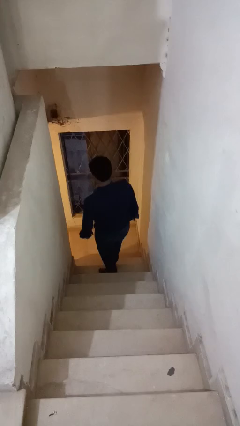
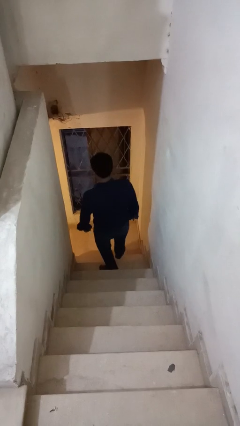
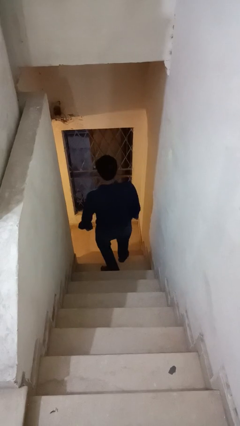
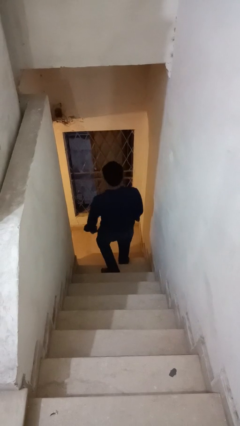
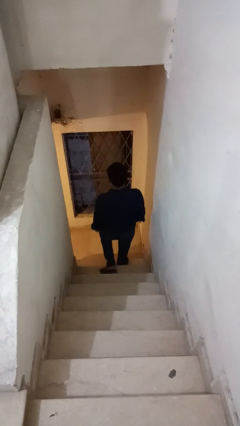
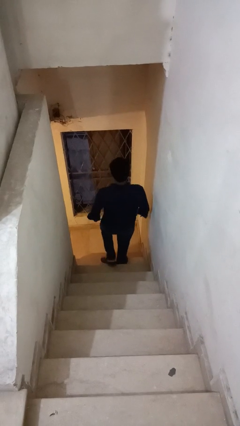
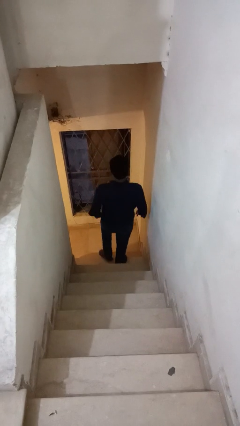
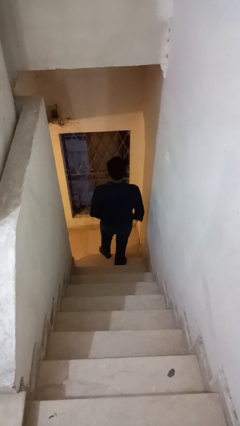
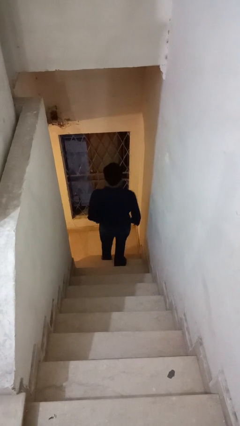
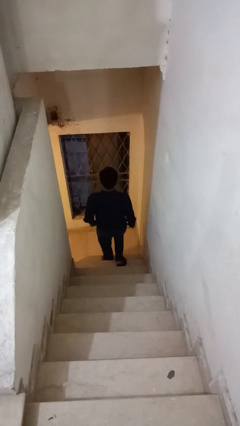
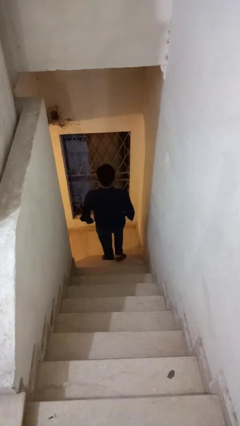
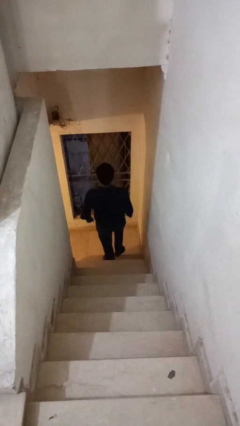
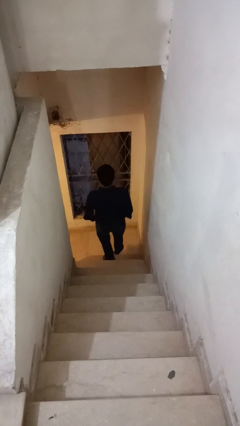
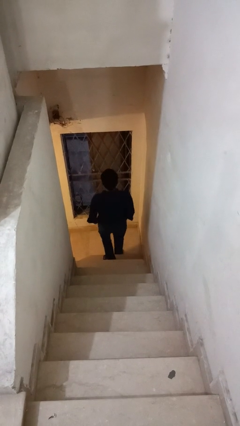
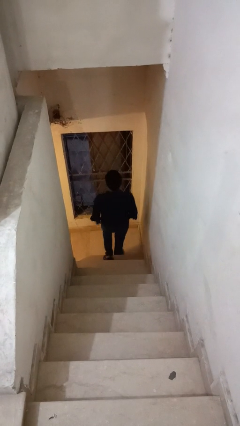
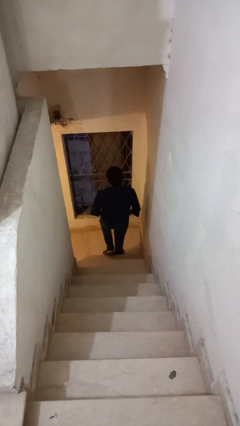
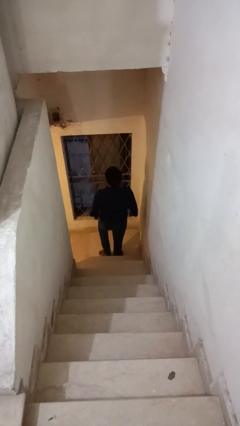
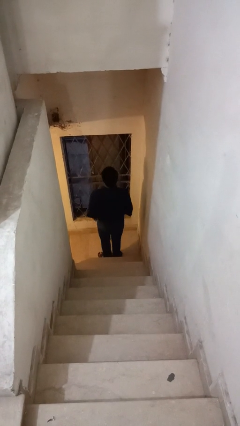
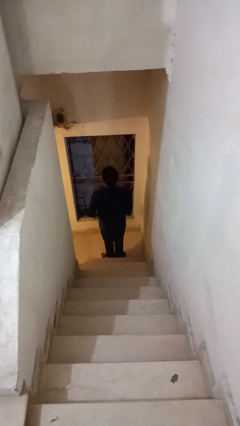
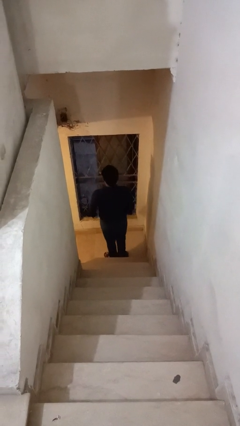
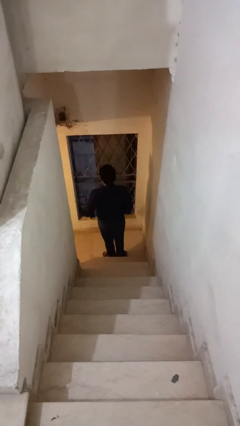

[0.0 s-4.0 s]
person climbs down stairs

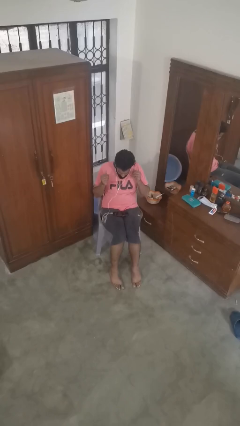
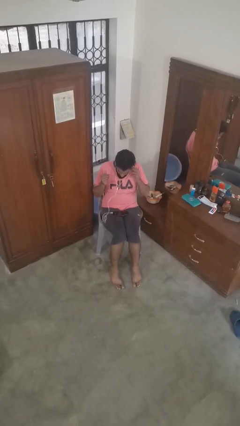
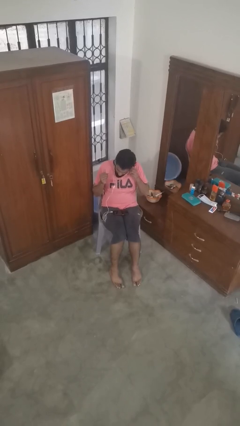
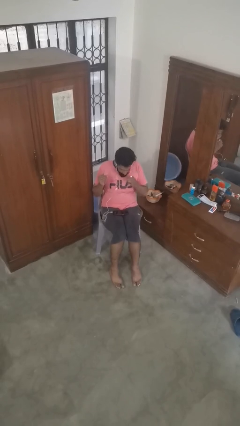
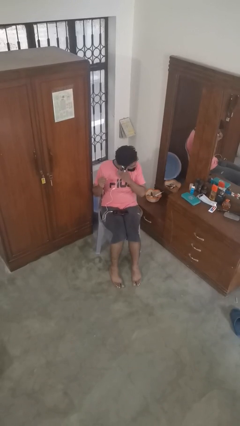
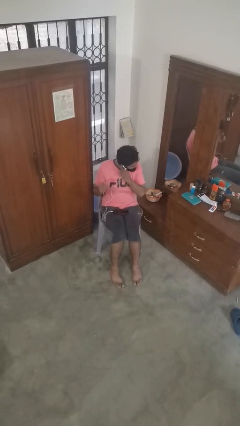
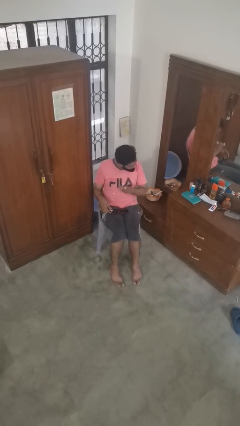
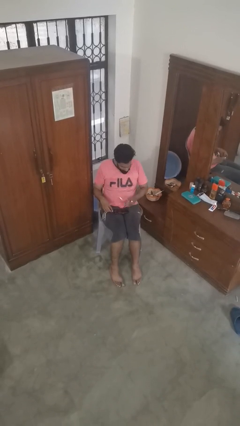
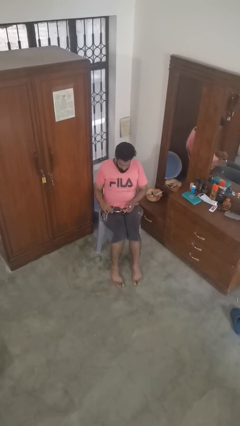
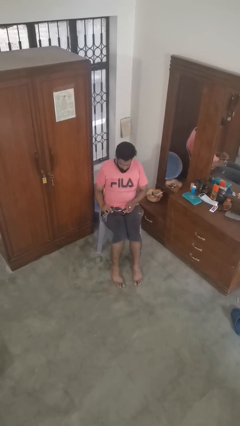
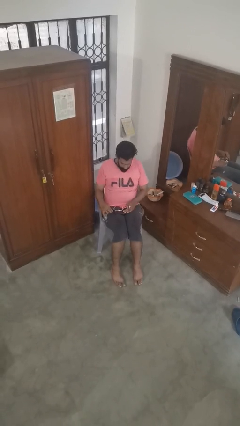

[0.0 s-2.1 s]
person takes off headphones

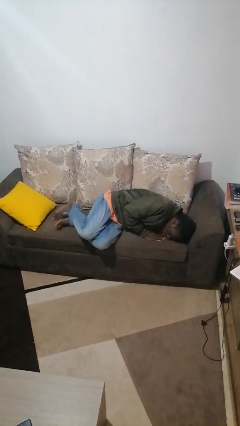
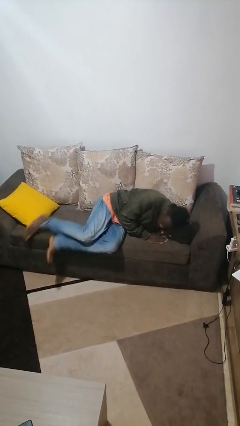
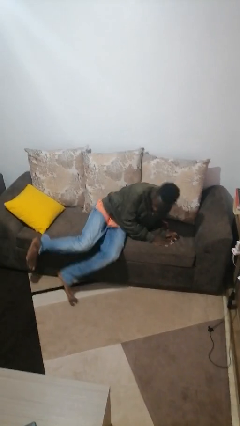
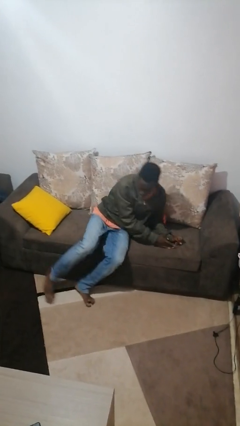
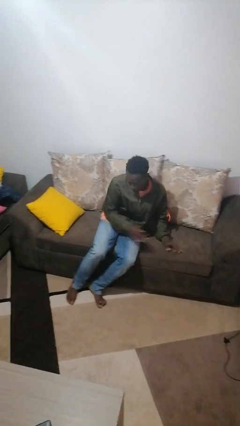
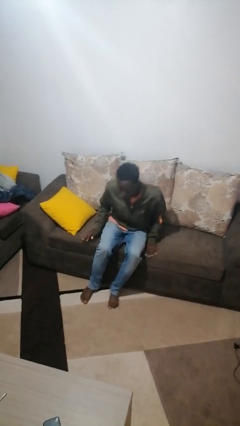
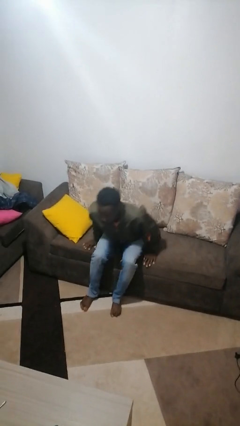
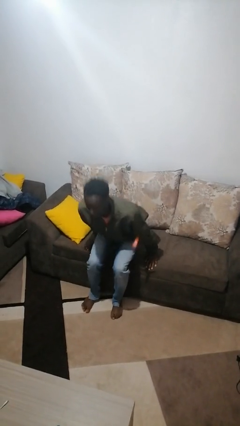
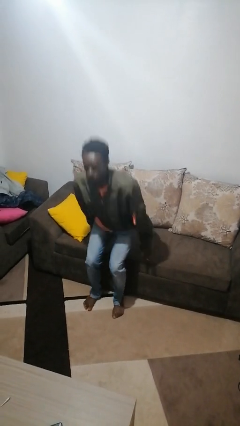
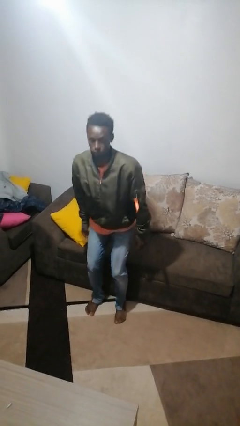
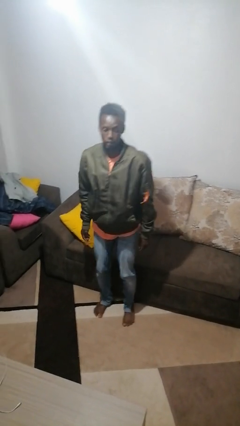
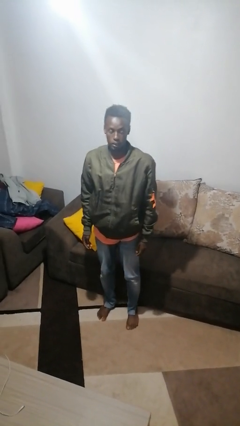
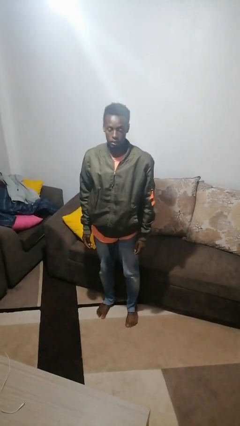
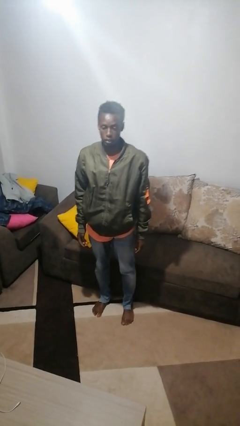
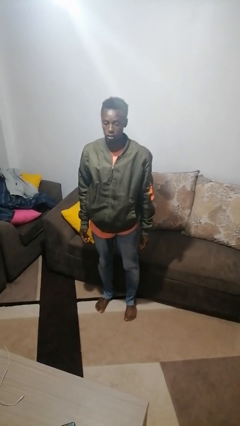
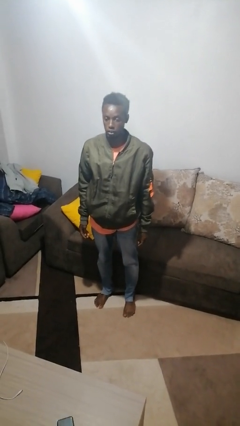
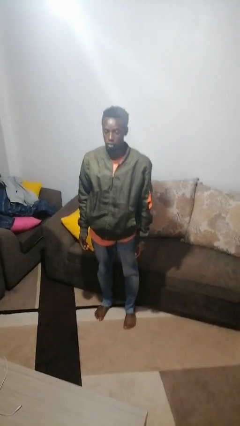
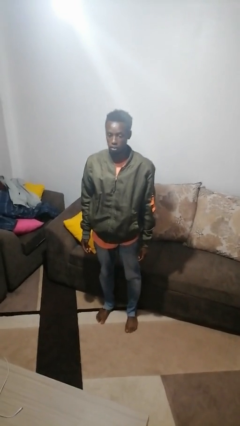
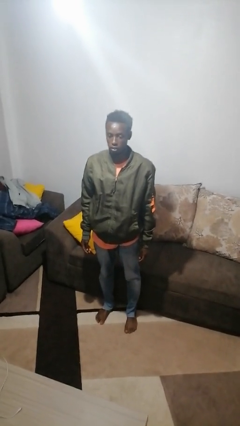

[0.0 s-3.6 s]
person stands up

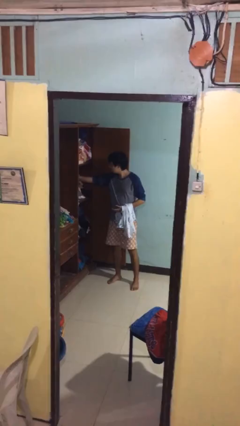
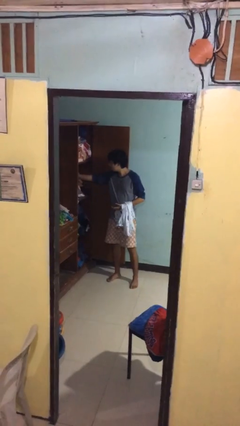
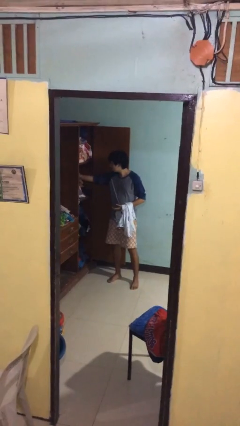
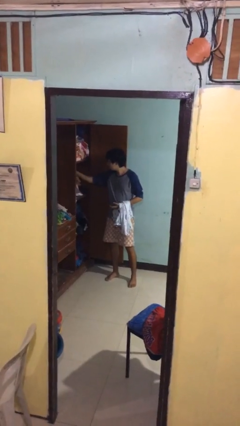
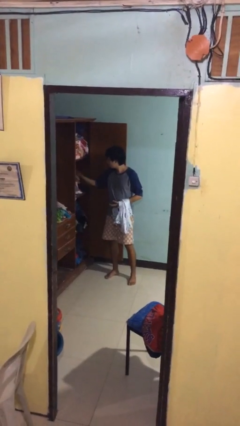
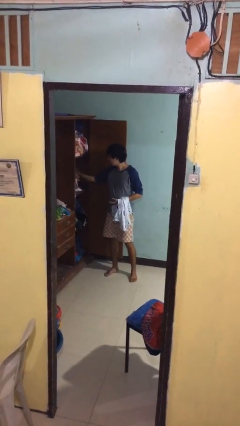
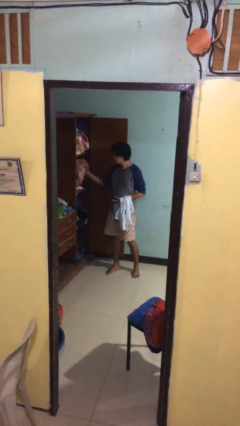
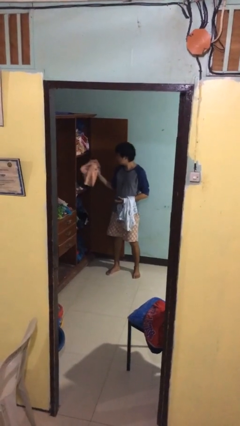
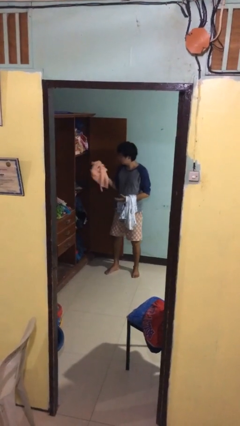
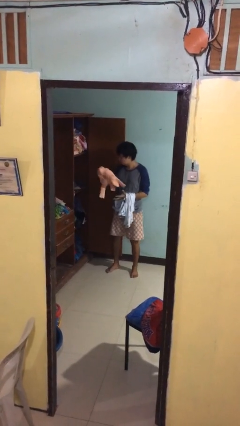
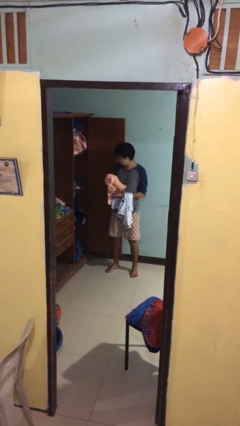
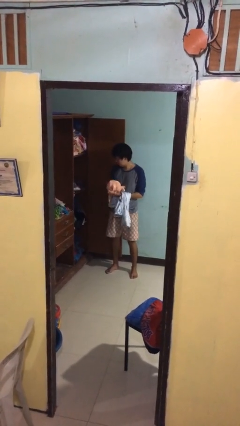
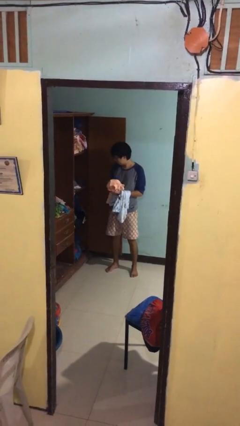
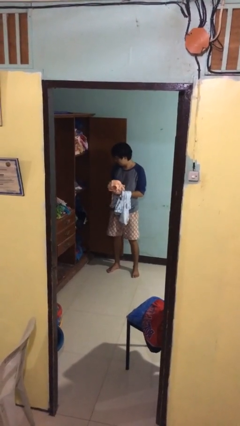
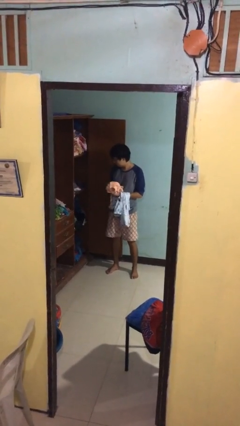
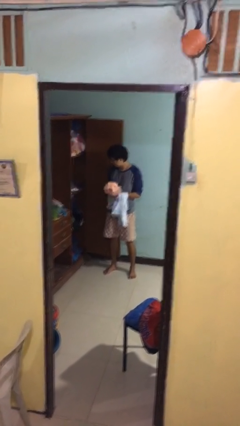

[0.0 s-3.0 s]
person takes clothes from dresser

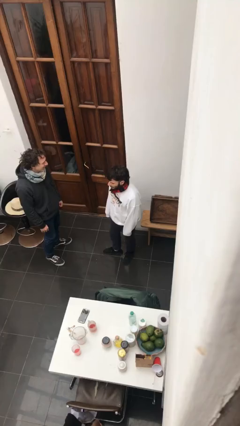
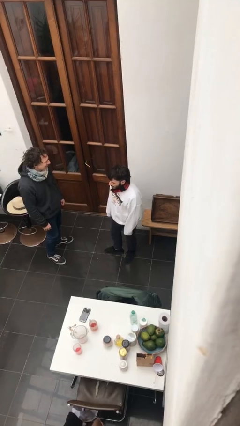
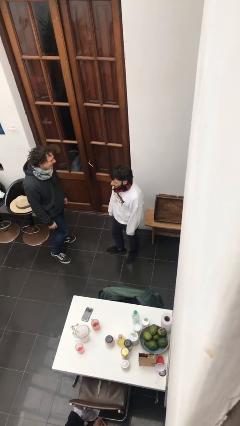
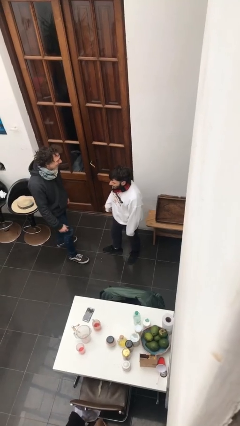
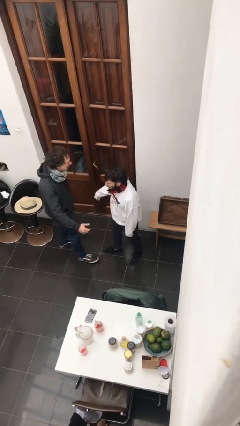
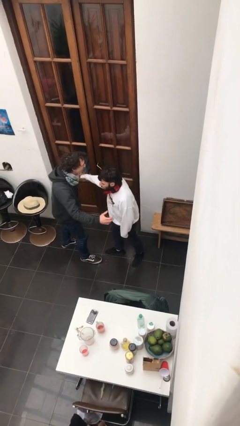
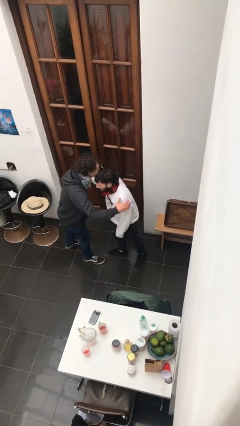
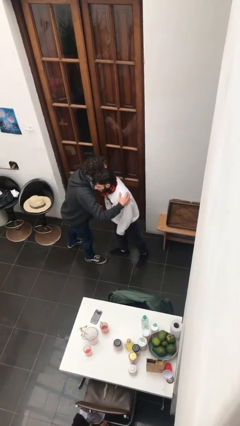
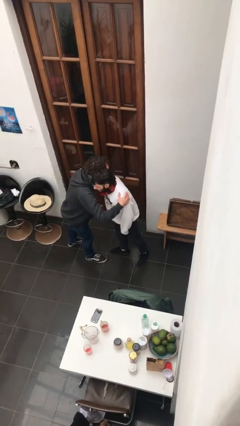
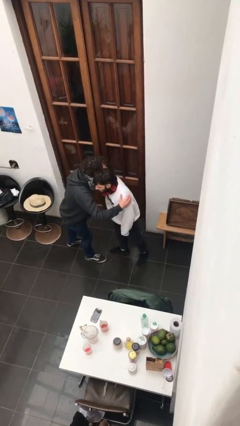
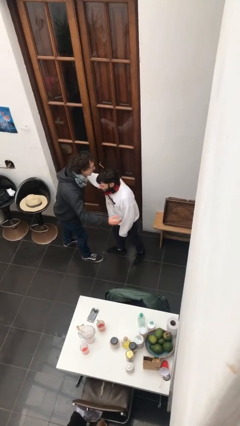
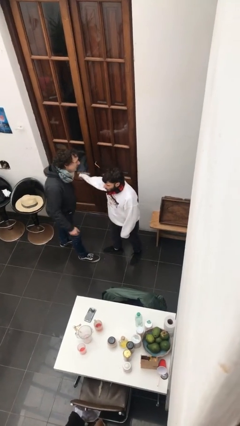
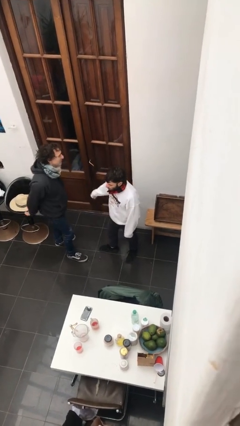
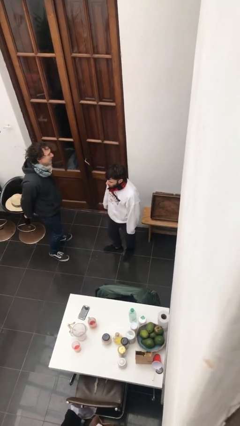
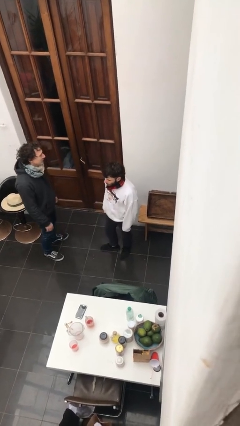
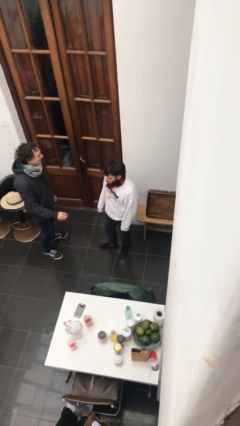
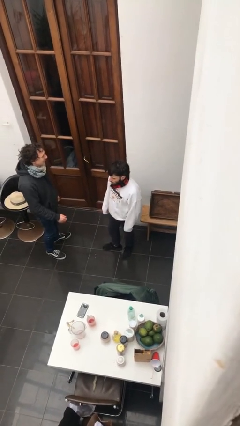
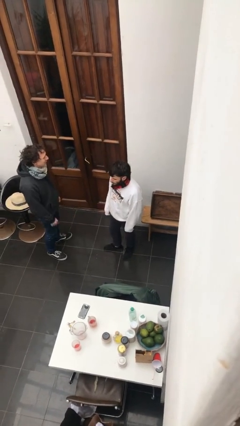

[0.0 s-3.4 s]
person kisses cheek of person

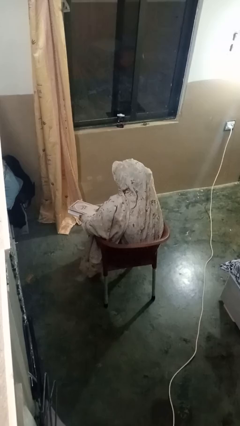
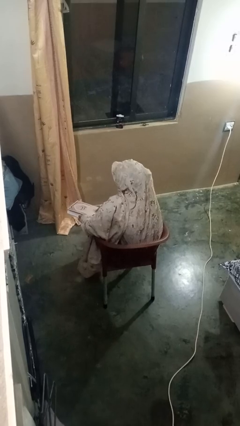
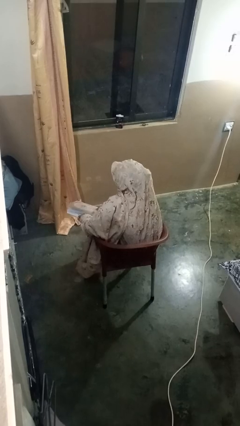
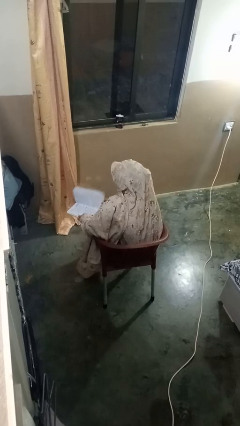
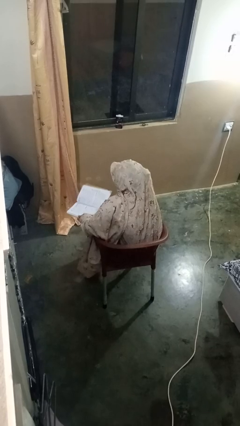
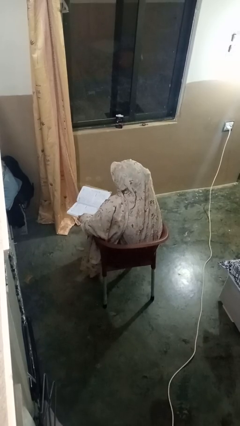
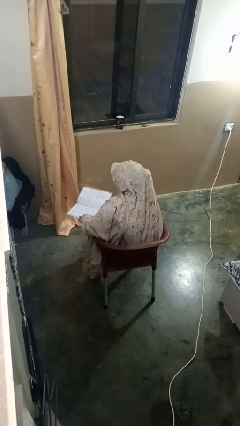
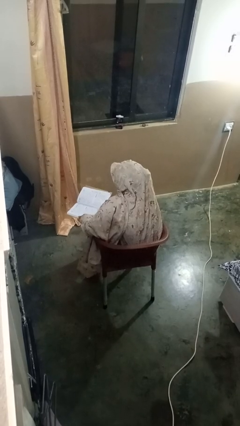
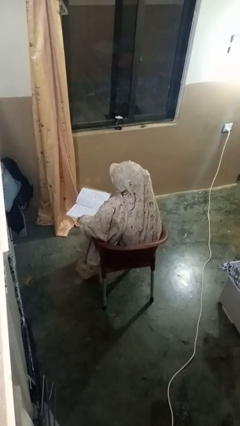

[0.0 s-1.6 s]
person reads book
